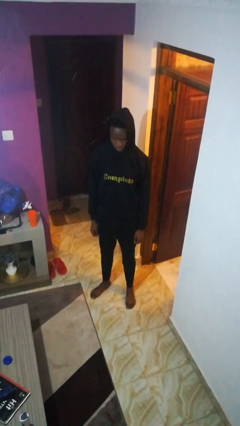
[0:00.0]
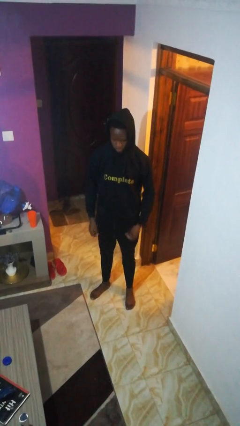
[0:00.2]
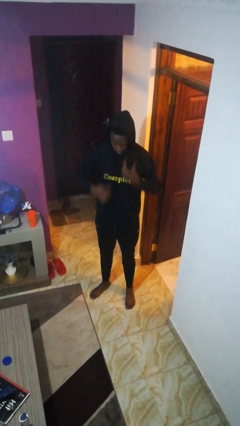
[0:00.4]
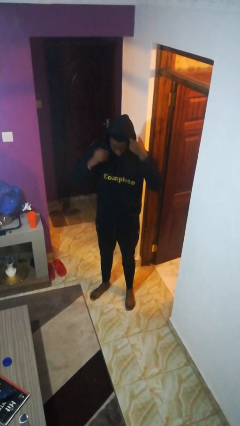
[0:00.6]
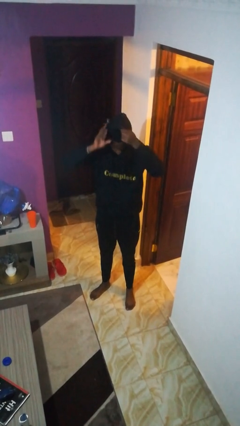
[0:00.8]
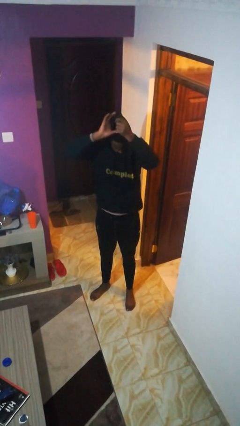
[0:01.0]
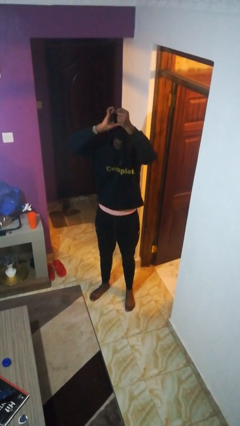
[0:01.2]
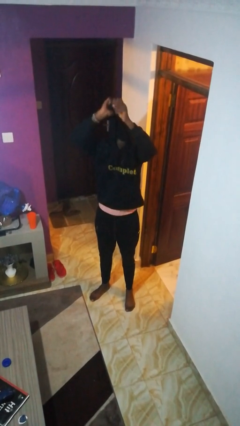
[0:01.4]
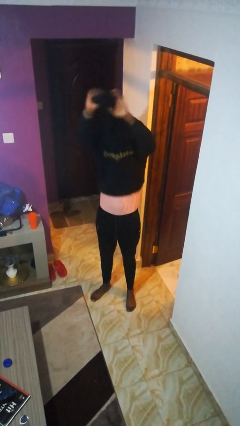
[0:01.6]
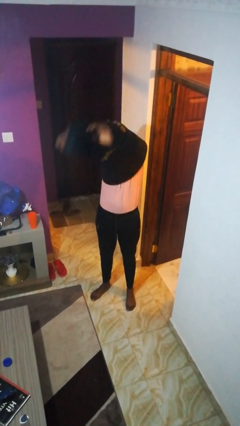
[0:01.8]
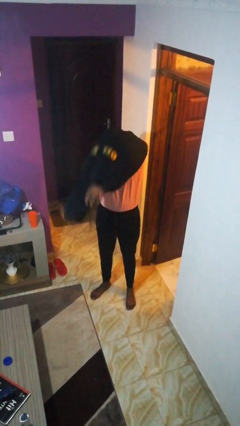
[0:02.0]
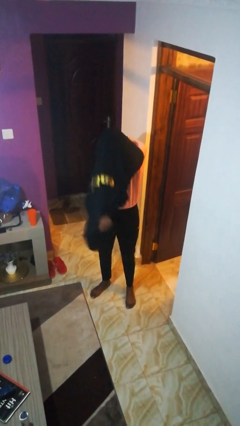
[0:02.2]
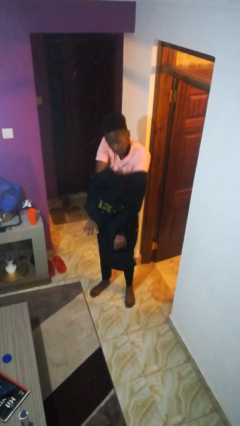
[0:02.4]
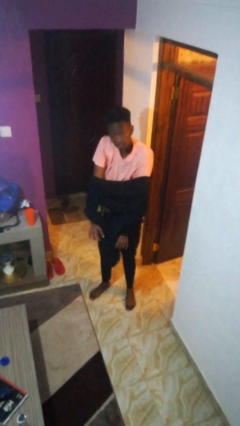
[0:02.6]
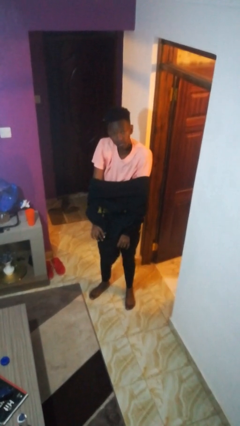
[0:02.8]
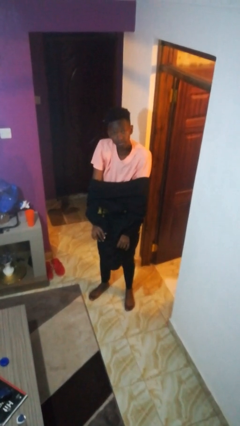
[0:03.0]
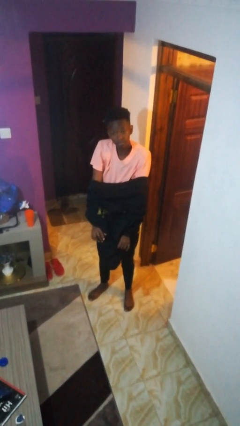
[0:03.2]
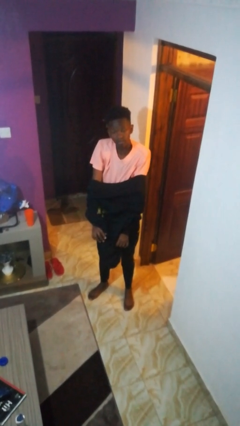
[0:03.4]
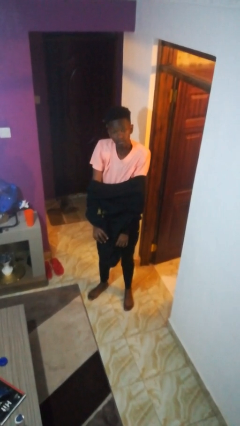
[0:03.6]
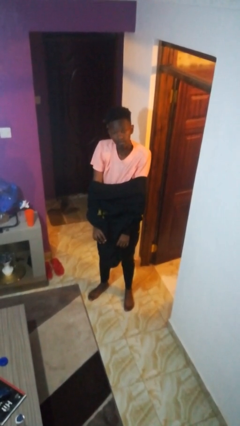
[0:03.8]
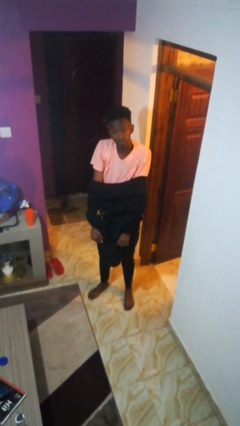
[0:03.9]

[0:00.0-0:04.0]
person takes off hoodie

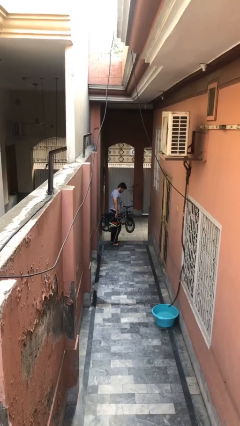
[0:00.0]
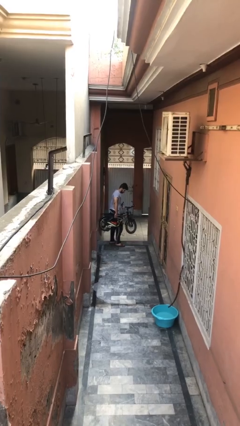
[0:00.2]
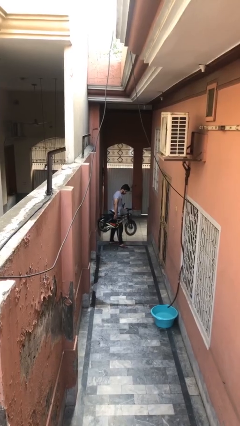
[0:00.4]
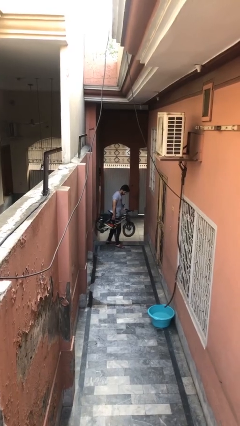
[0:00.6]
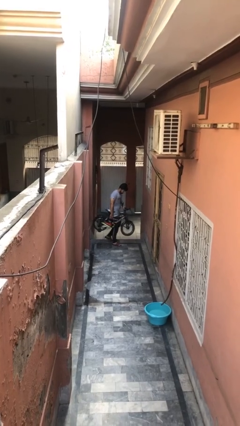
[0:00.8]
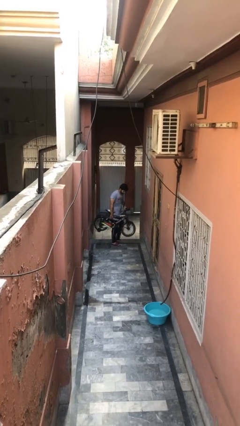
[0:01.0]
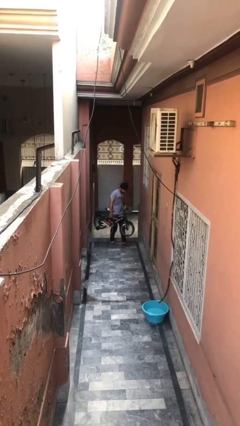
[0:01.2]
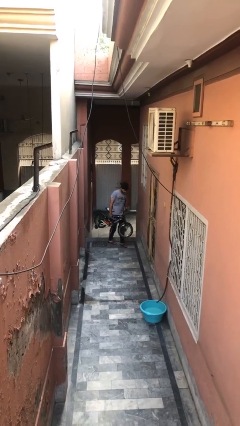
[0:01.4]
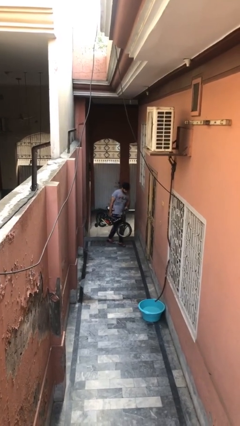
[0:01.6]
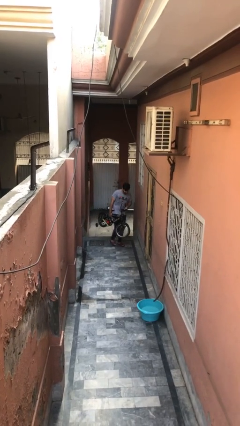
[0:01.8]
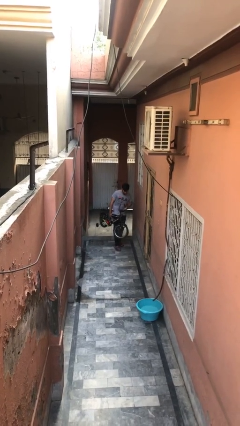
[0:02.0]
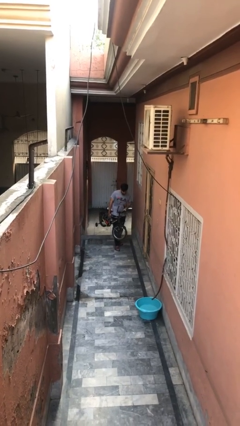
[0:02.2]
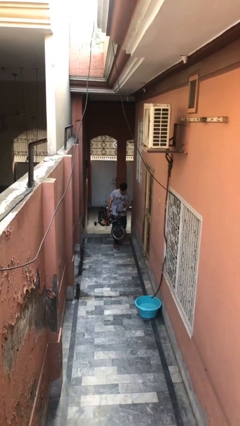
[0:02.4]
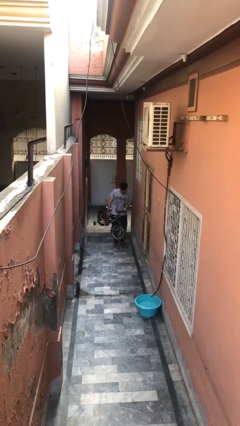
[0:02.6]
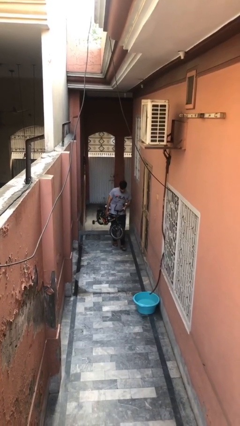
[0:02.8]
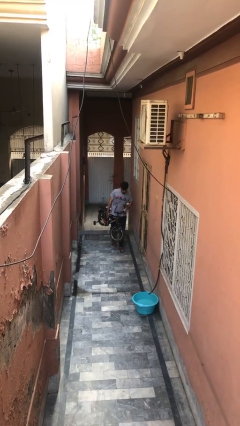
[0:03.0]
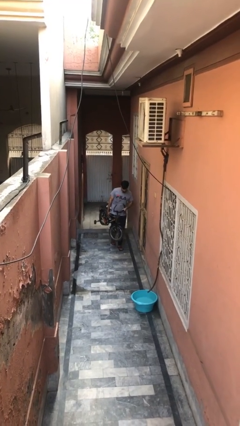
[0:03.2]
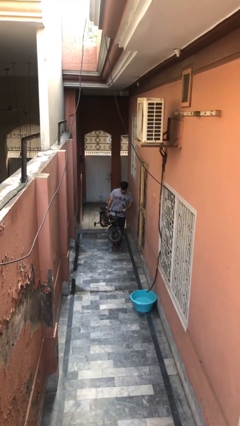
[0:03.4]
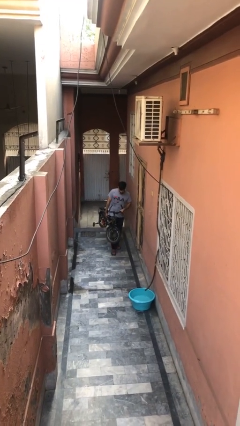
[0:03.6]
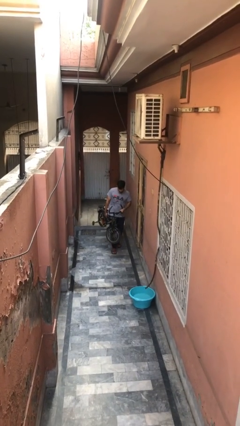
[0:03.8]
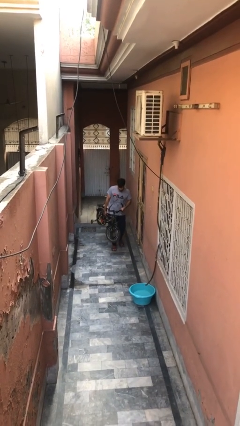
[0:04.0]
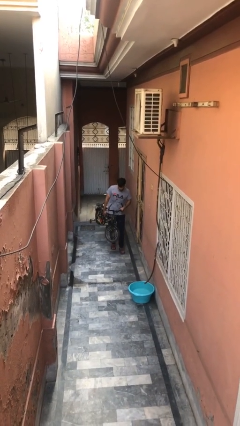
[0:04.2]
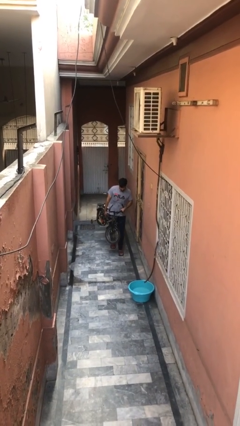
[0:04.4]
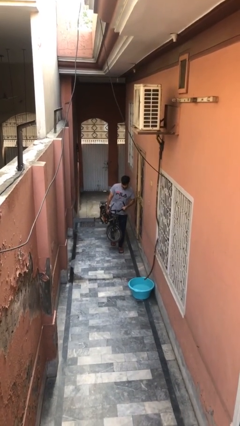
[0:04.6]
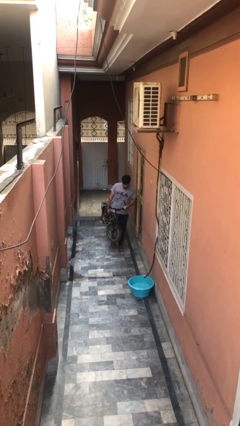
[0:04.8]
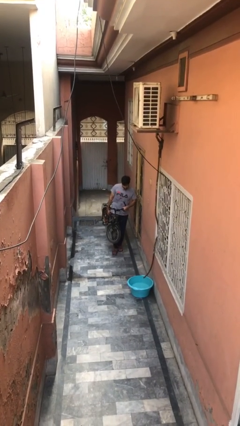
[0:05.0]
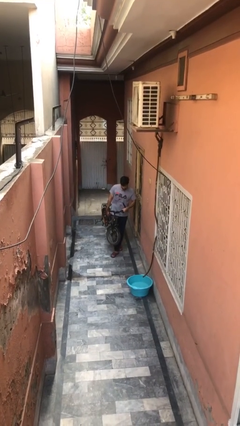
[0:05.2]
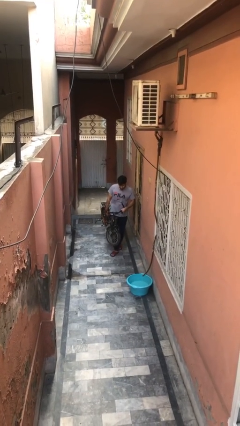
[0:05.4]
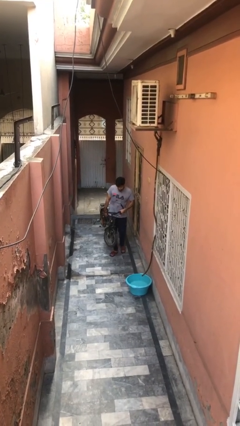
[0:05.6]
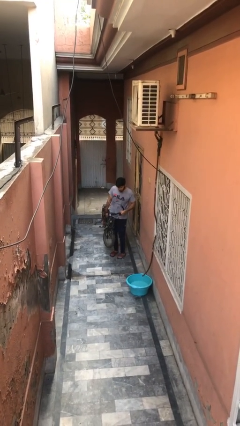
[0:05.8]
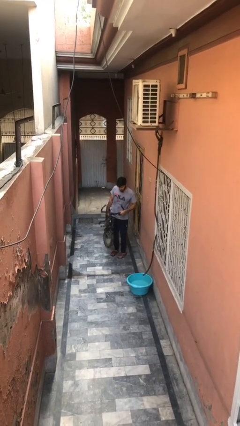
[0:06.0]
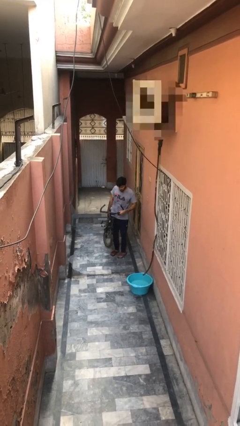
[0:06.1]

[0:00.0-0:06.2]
person carries bicycle

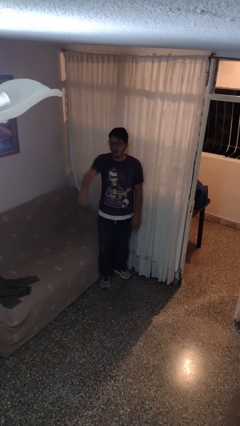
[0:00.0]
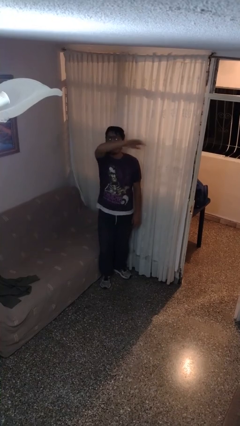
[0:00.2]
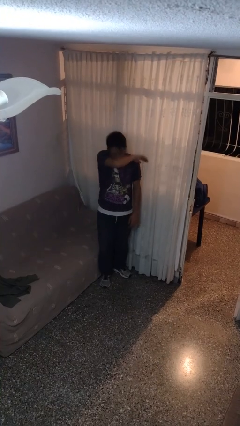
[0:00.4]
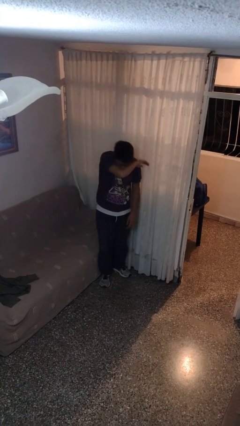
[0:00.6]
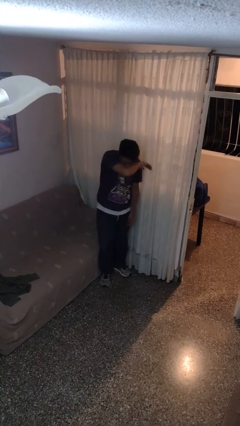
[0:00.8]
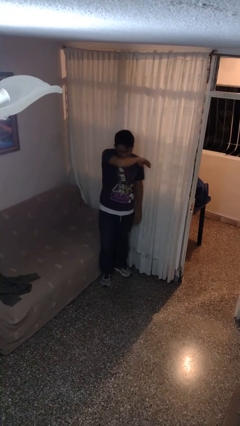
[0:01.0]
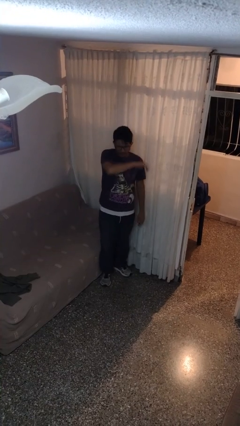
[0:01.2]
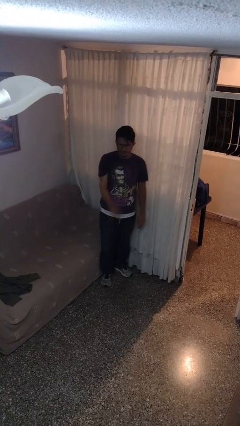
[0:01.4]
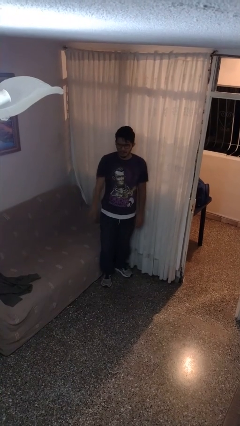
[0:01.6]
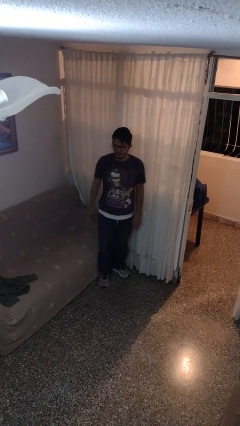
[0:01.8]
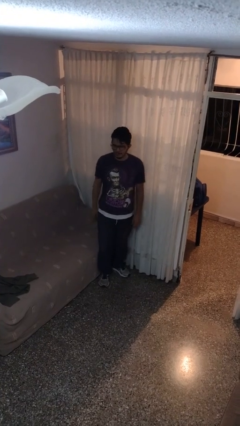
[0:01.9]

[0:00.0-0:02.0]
person sneezes into arm

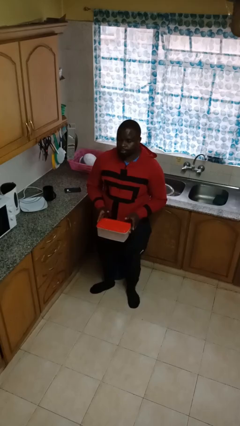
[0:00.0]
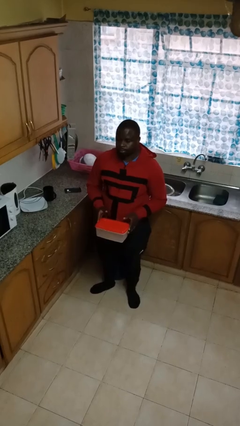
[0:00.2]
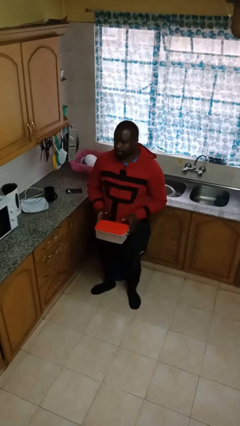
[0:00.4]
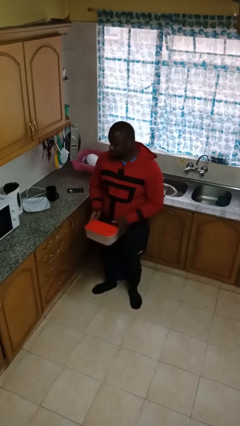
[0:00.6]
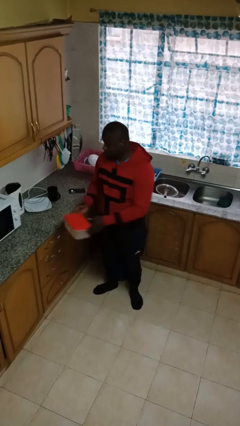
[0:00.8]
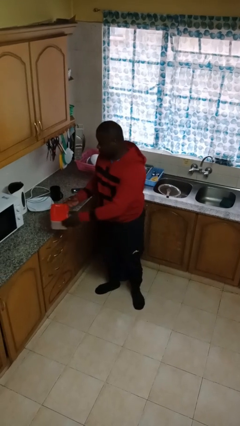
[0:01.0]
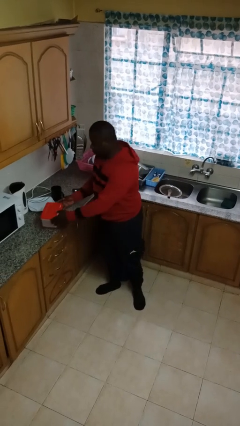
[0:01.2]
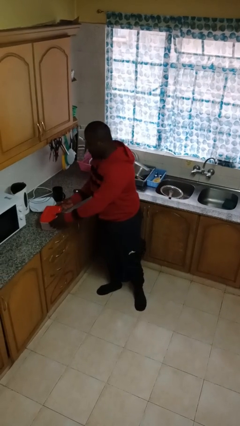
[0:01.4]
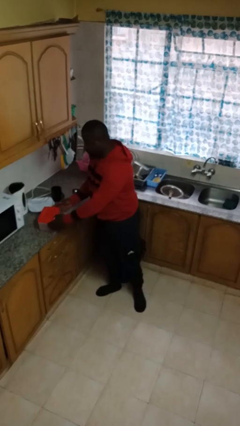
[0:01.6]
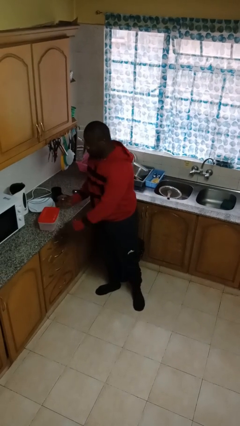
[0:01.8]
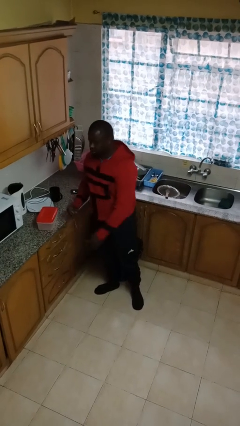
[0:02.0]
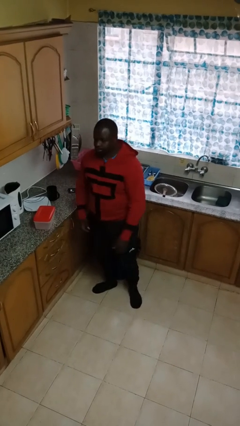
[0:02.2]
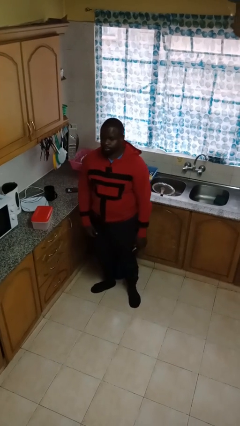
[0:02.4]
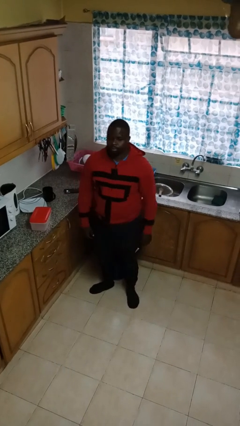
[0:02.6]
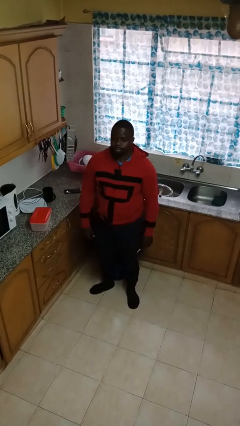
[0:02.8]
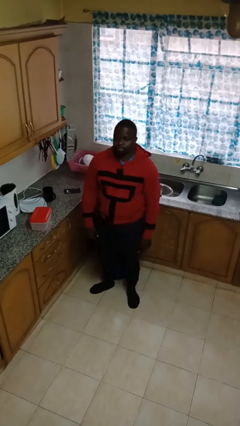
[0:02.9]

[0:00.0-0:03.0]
person puts down object on countertop

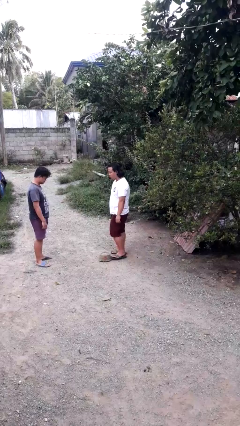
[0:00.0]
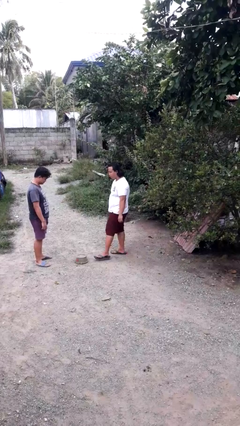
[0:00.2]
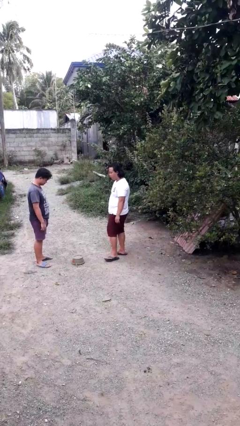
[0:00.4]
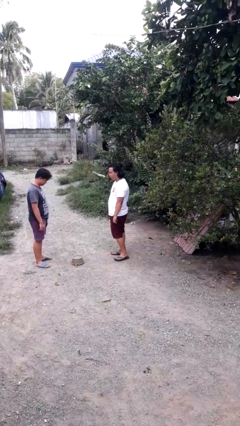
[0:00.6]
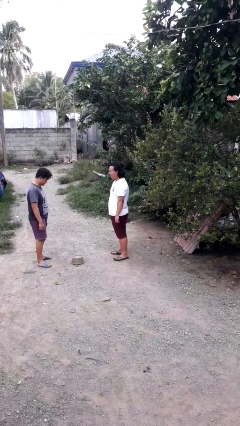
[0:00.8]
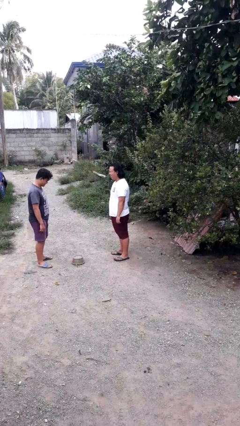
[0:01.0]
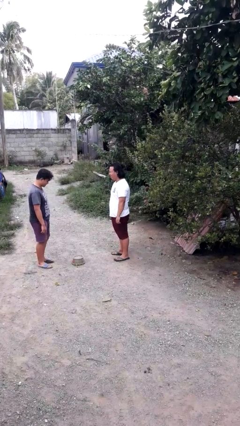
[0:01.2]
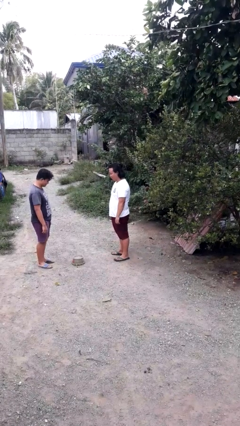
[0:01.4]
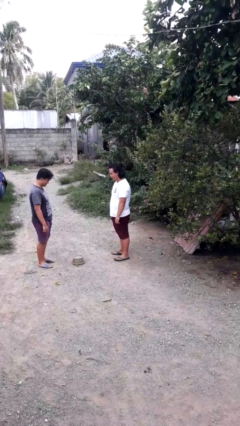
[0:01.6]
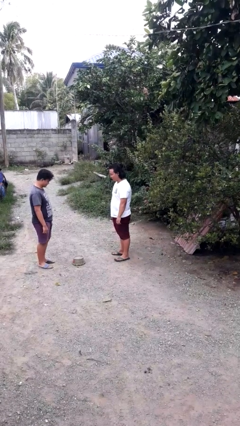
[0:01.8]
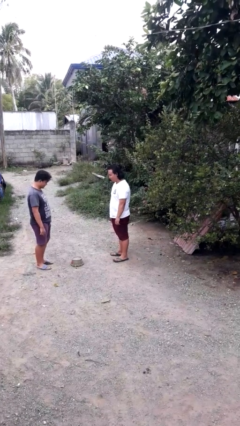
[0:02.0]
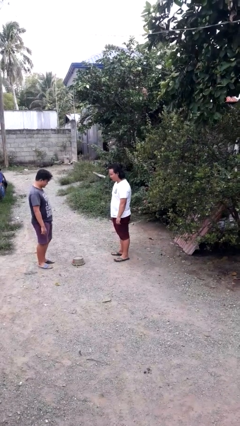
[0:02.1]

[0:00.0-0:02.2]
person kicks object to person
